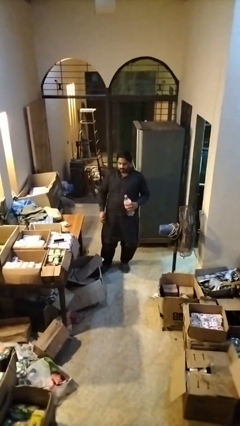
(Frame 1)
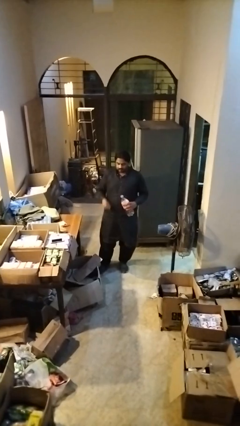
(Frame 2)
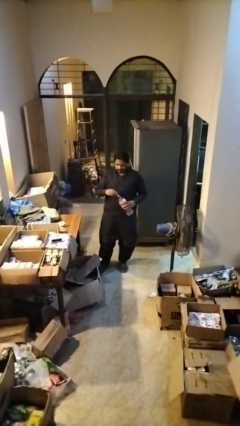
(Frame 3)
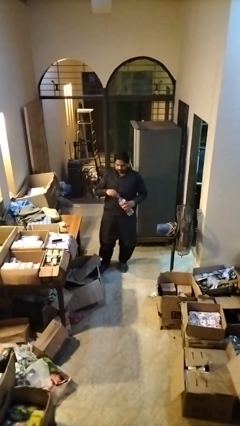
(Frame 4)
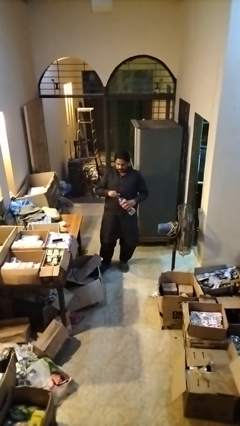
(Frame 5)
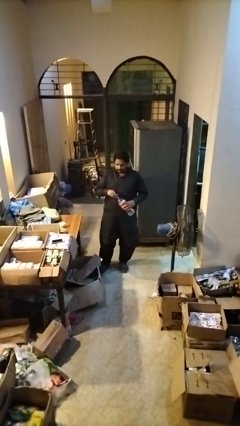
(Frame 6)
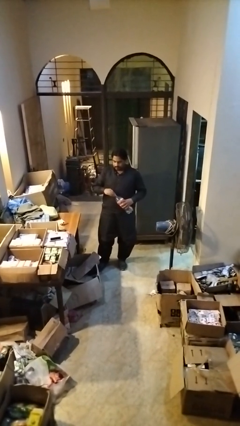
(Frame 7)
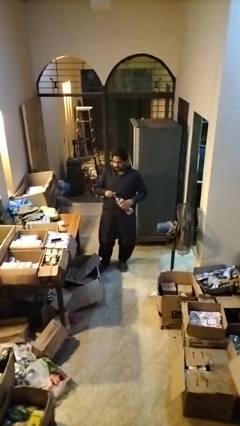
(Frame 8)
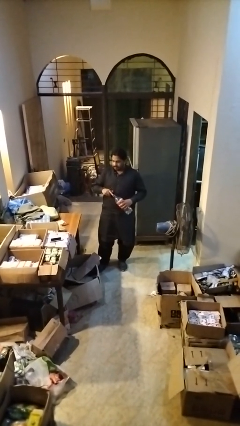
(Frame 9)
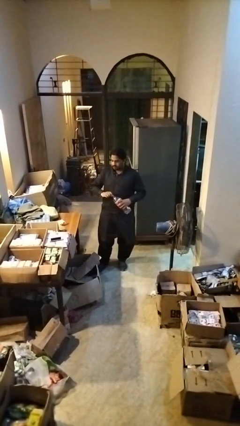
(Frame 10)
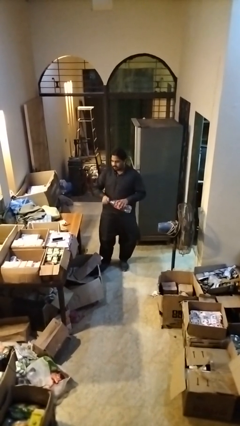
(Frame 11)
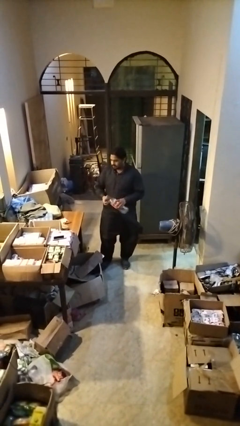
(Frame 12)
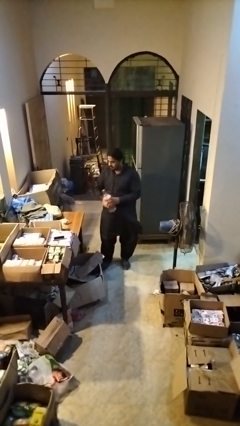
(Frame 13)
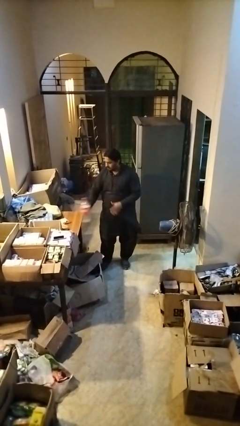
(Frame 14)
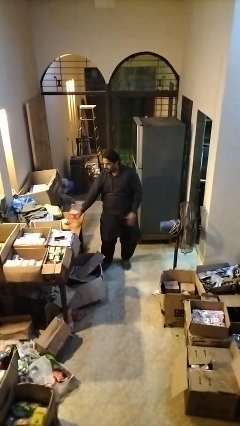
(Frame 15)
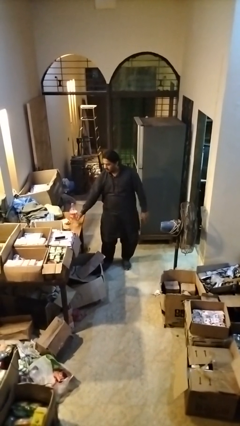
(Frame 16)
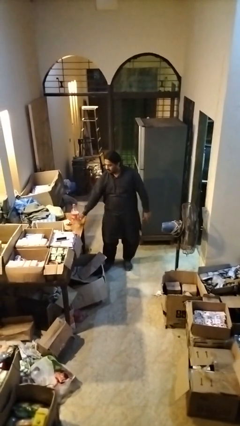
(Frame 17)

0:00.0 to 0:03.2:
person screws lid to bottle

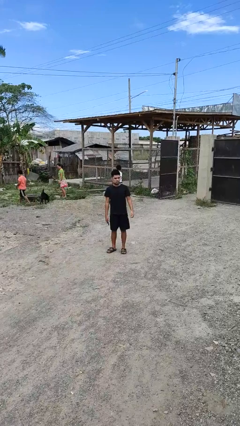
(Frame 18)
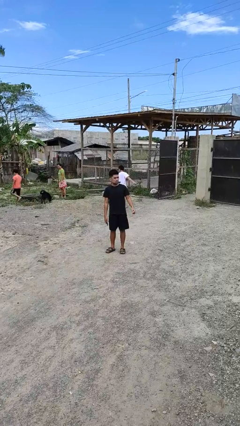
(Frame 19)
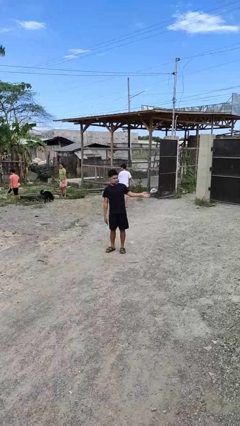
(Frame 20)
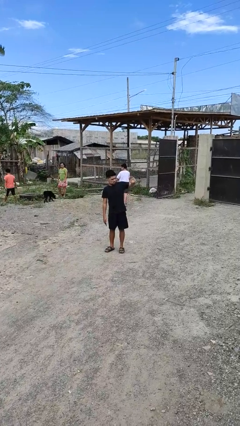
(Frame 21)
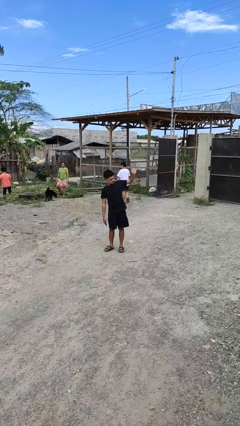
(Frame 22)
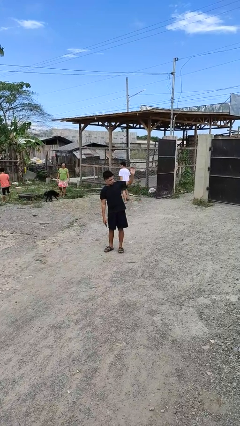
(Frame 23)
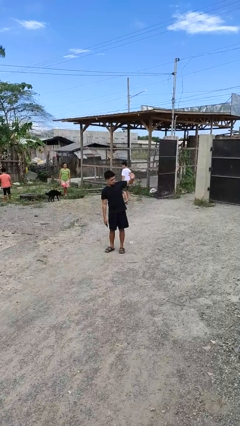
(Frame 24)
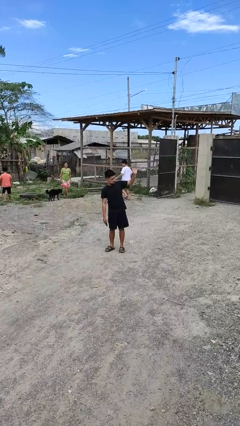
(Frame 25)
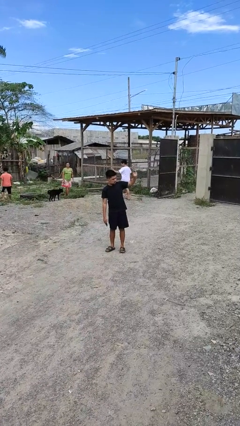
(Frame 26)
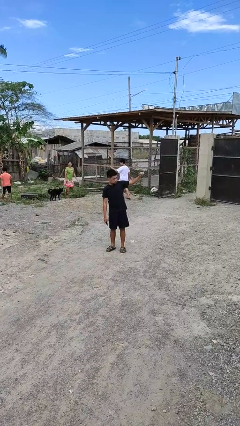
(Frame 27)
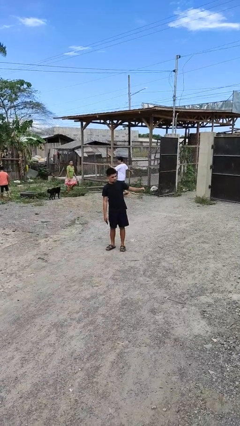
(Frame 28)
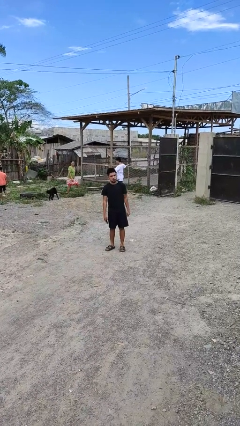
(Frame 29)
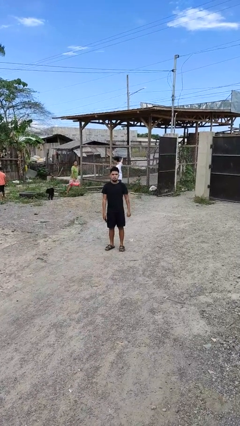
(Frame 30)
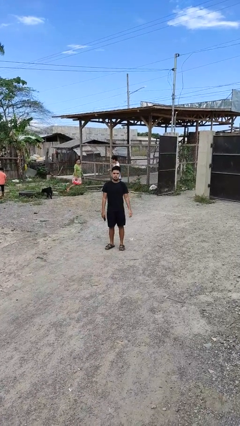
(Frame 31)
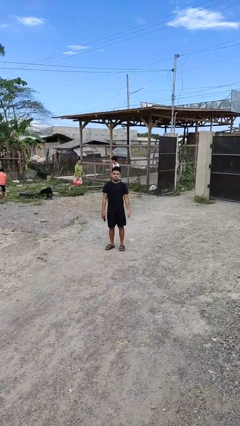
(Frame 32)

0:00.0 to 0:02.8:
person waves at person

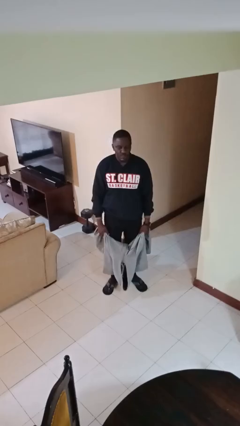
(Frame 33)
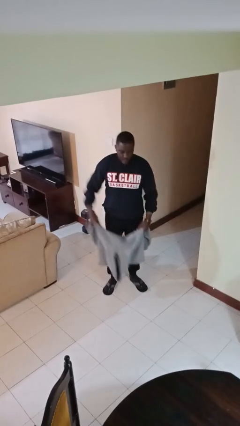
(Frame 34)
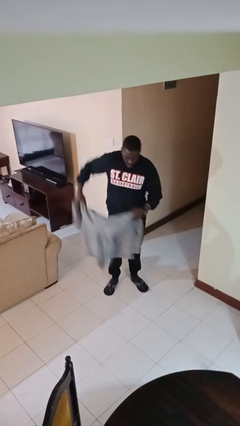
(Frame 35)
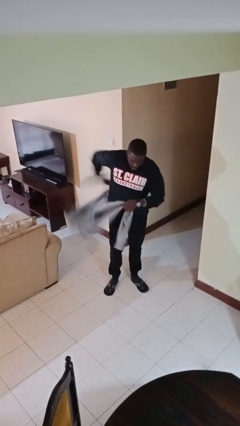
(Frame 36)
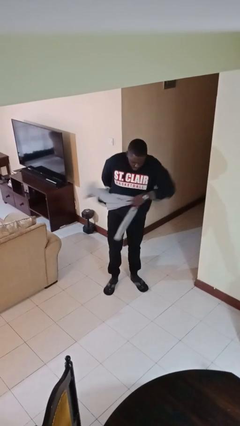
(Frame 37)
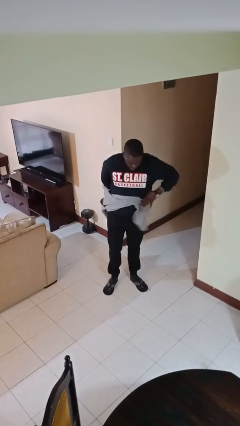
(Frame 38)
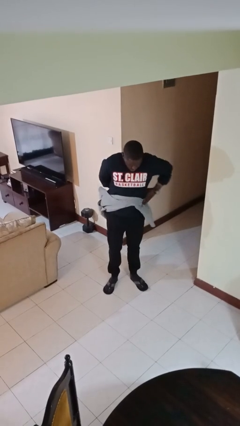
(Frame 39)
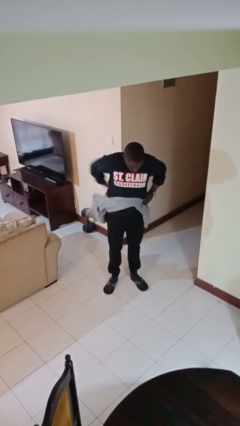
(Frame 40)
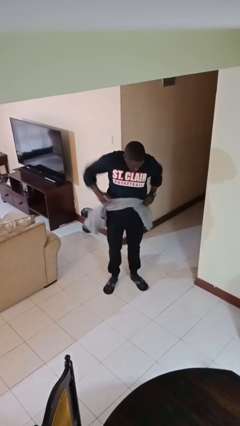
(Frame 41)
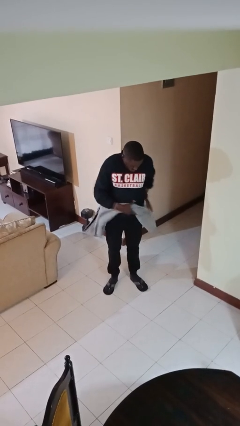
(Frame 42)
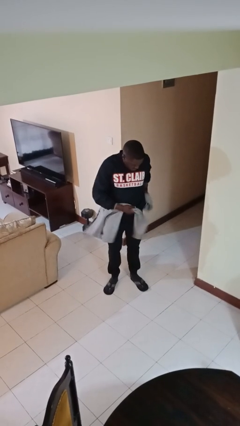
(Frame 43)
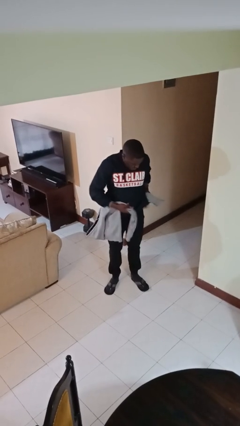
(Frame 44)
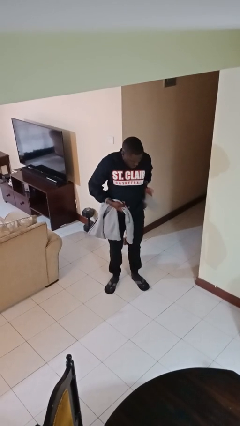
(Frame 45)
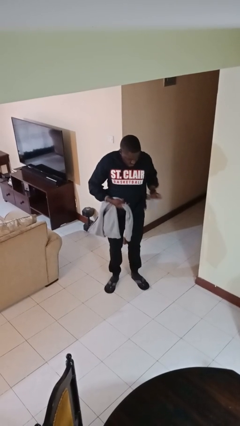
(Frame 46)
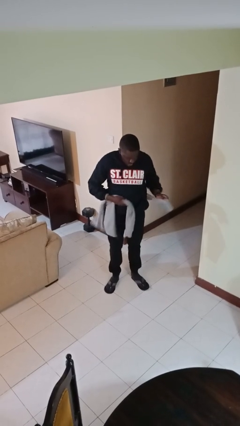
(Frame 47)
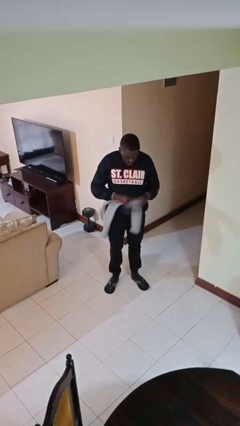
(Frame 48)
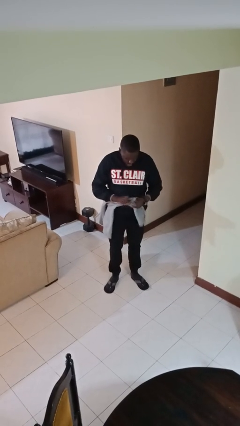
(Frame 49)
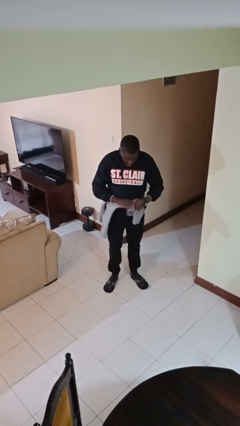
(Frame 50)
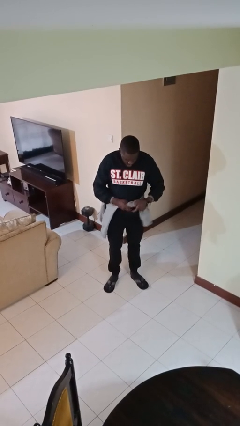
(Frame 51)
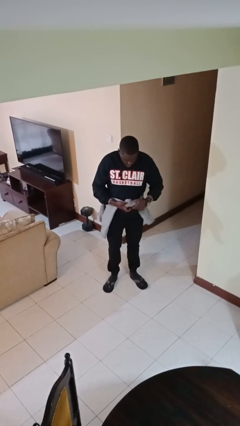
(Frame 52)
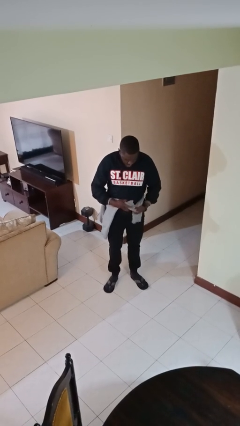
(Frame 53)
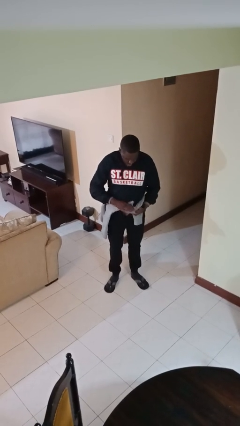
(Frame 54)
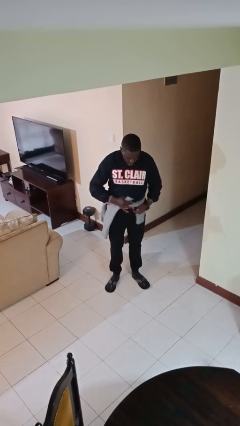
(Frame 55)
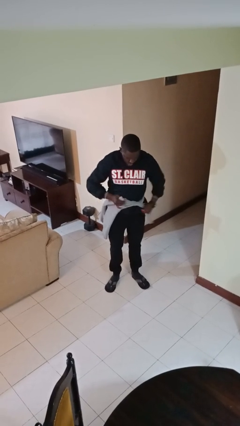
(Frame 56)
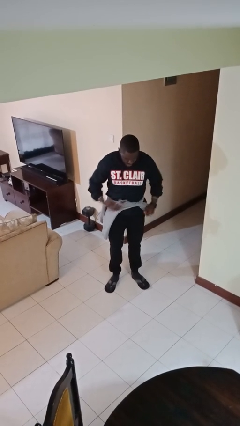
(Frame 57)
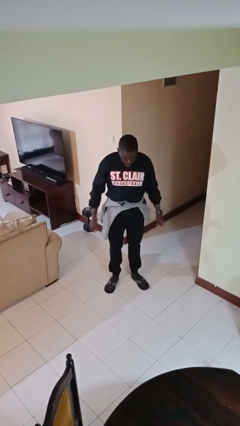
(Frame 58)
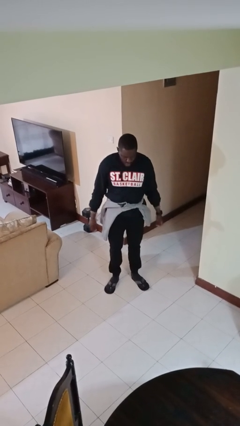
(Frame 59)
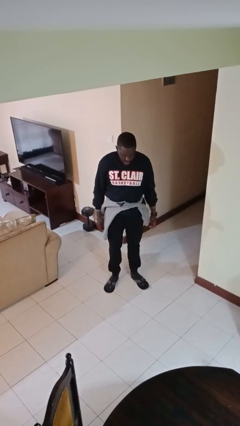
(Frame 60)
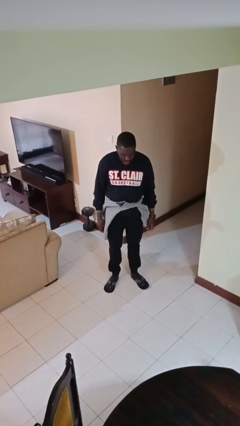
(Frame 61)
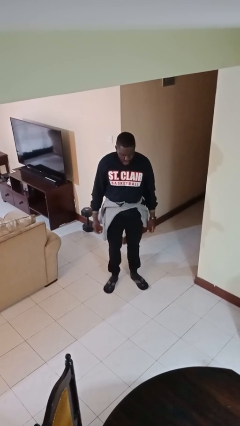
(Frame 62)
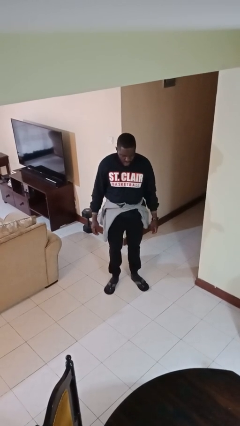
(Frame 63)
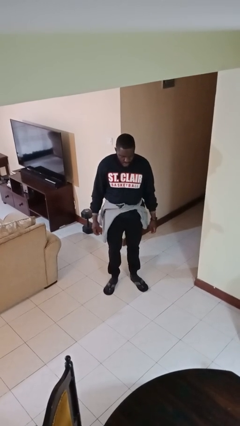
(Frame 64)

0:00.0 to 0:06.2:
person ties jacket around waist

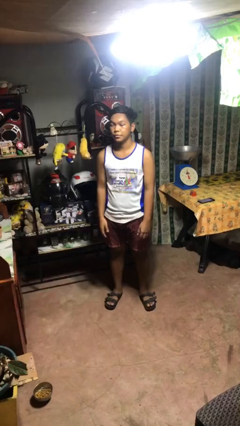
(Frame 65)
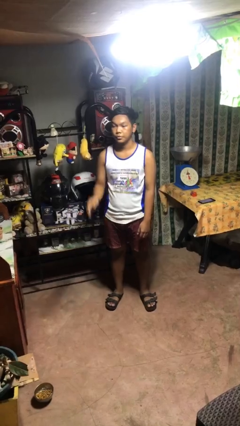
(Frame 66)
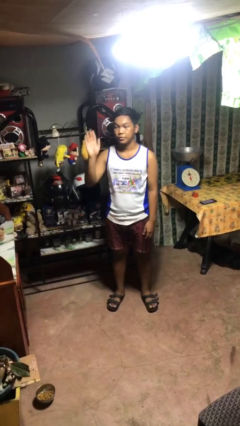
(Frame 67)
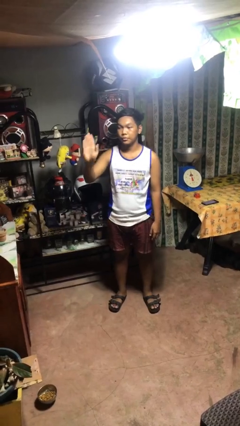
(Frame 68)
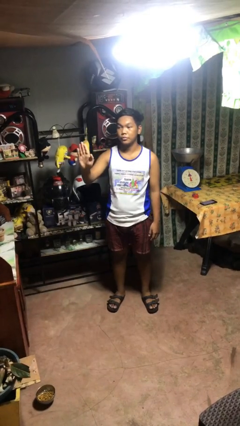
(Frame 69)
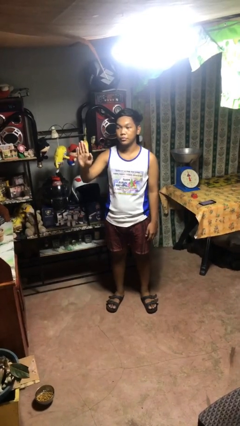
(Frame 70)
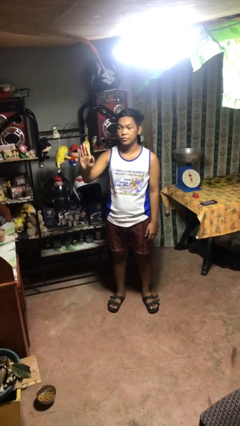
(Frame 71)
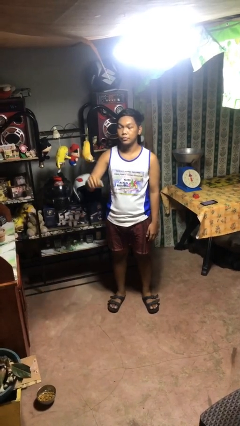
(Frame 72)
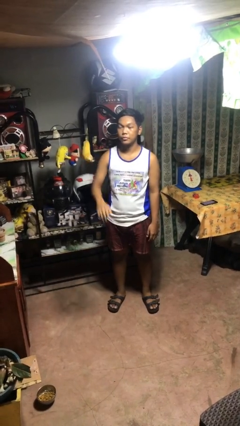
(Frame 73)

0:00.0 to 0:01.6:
person gestures stop

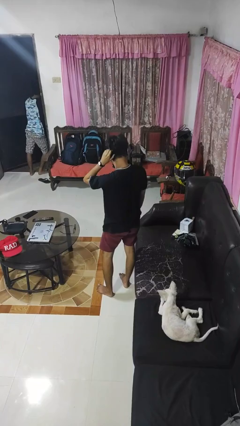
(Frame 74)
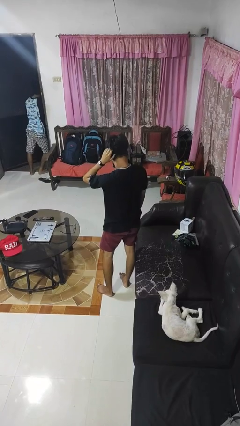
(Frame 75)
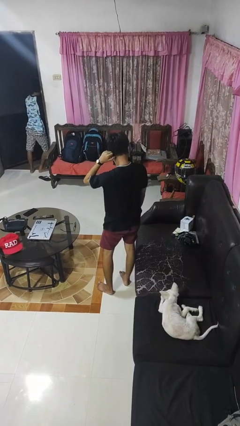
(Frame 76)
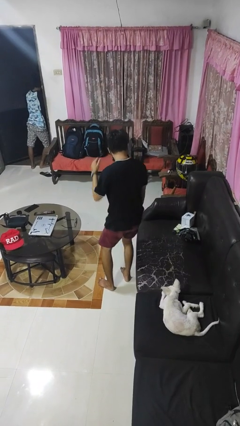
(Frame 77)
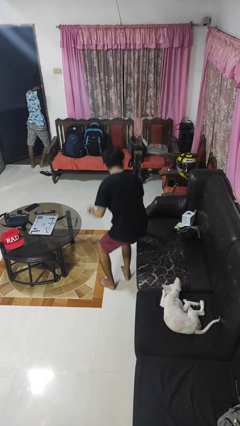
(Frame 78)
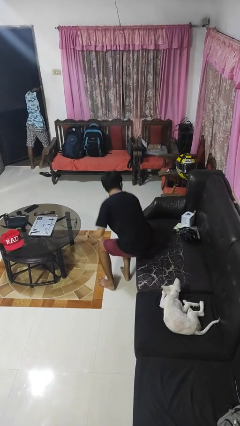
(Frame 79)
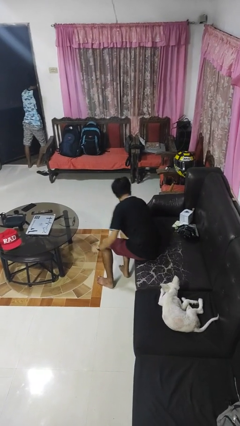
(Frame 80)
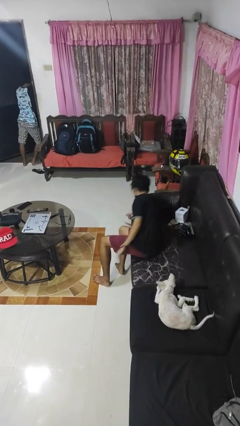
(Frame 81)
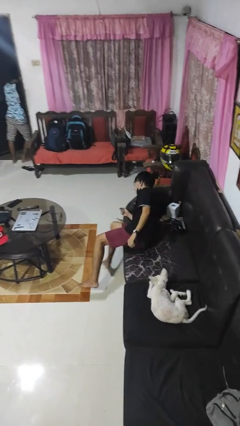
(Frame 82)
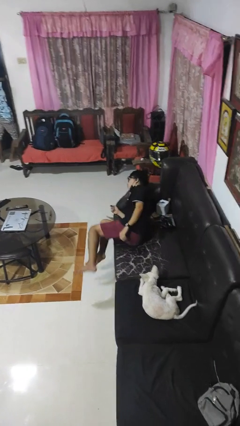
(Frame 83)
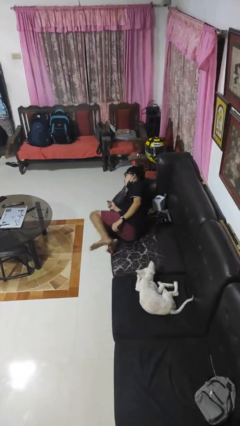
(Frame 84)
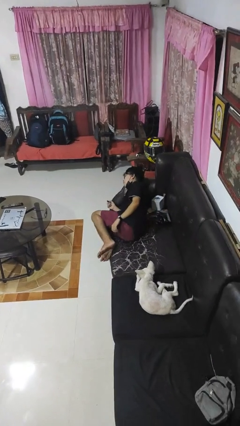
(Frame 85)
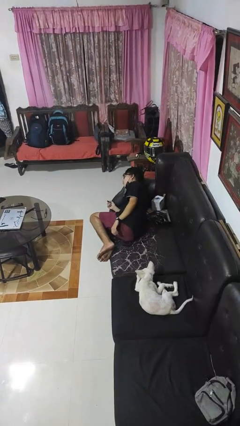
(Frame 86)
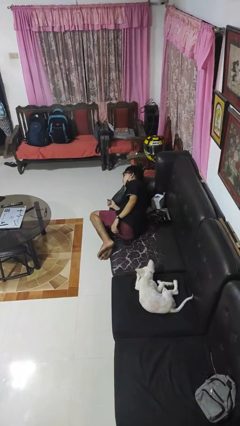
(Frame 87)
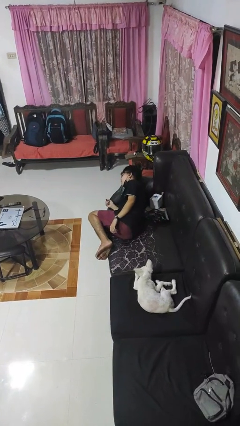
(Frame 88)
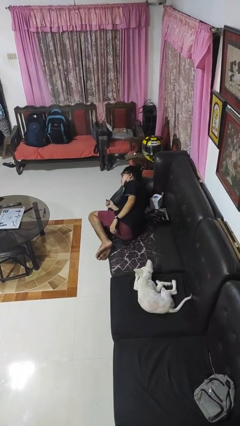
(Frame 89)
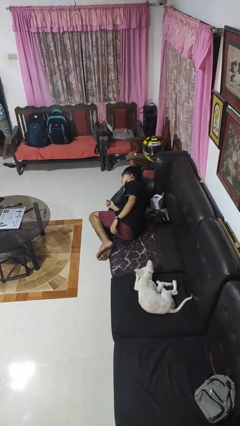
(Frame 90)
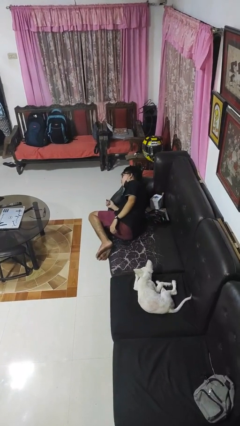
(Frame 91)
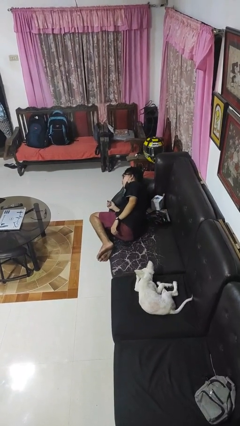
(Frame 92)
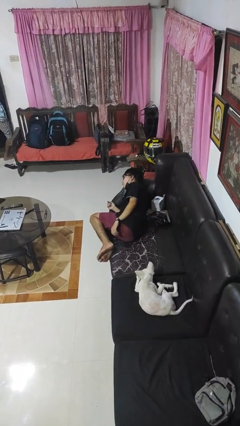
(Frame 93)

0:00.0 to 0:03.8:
person lies down on couch
